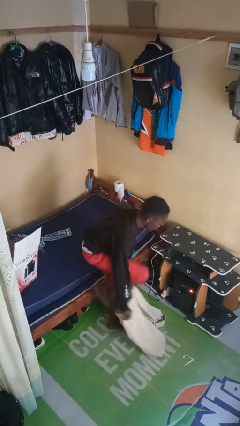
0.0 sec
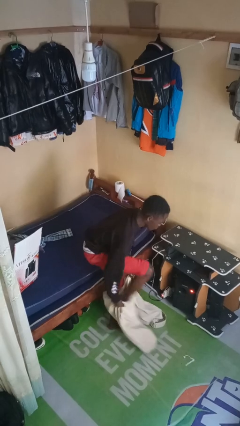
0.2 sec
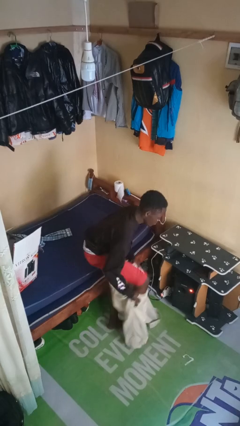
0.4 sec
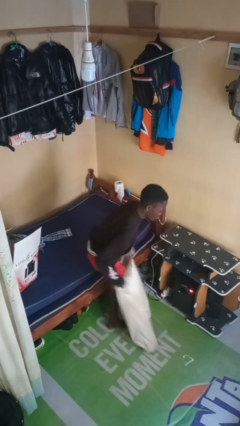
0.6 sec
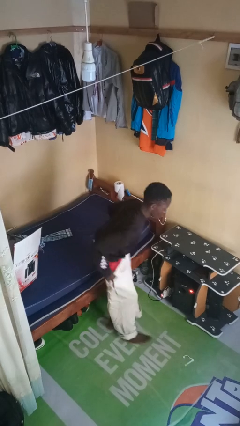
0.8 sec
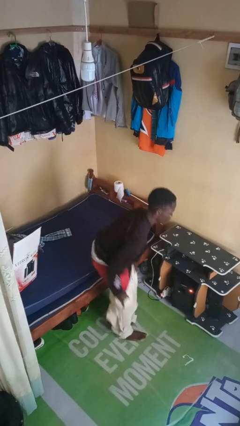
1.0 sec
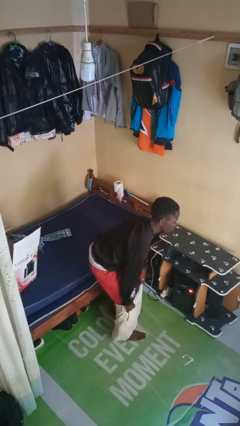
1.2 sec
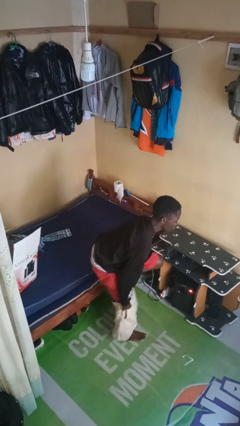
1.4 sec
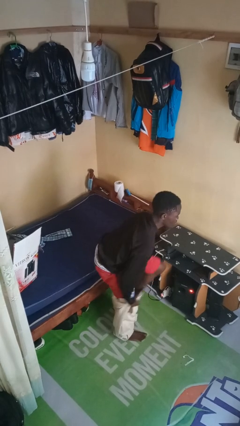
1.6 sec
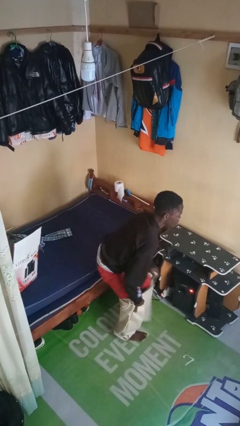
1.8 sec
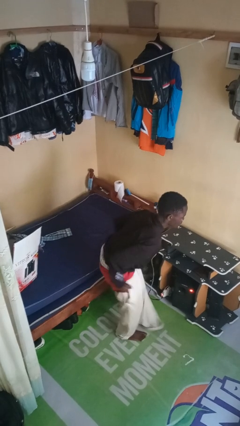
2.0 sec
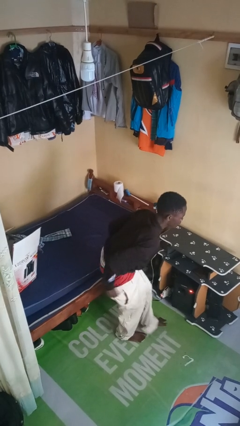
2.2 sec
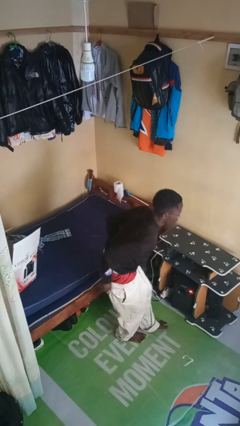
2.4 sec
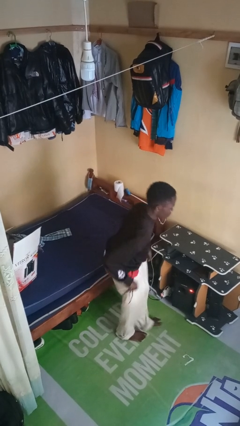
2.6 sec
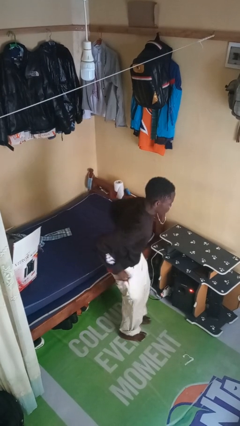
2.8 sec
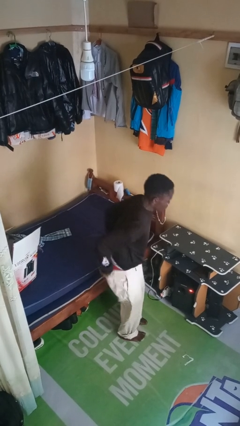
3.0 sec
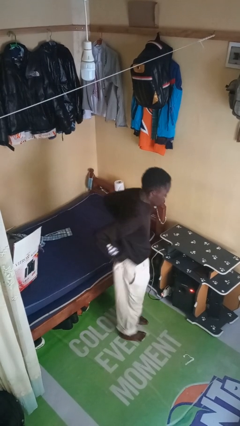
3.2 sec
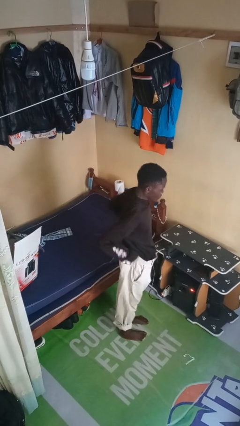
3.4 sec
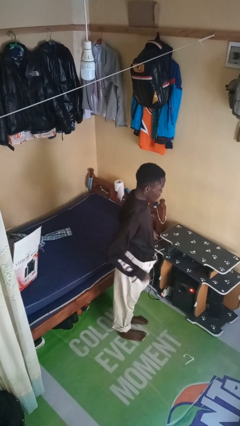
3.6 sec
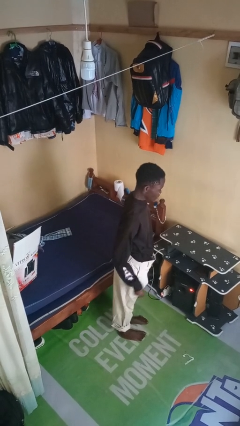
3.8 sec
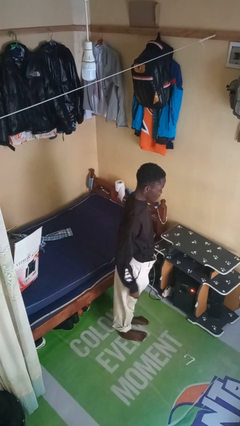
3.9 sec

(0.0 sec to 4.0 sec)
person puts on pants

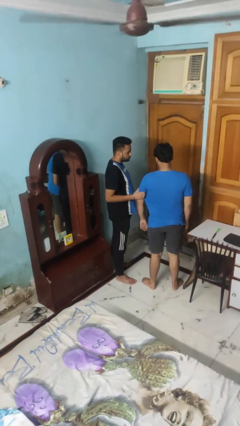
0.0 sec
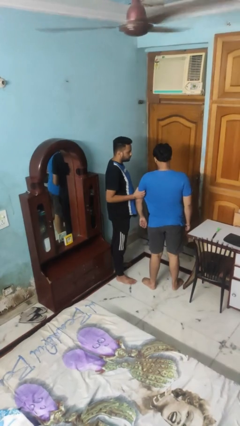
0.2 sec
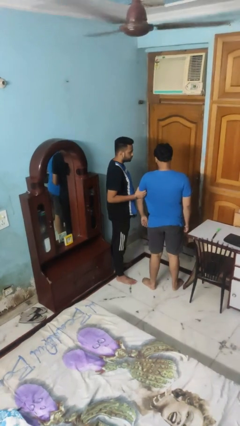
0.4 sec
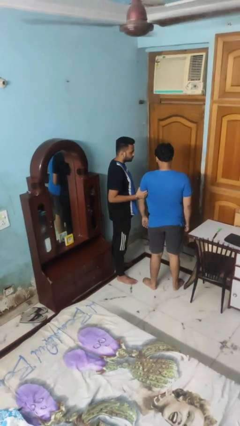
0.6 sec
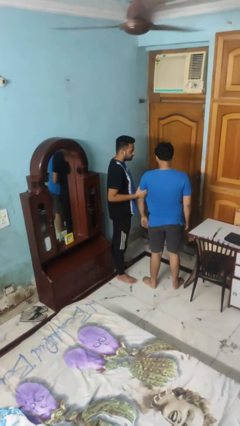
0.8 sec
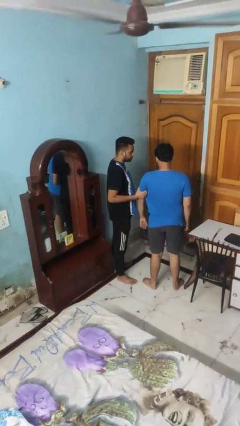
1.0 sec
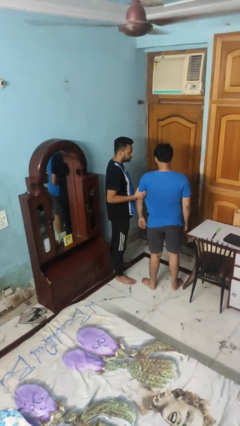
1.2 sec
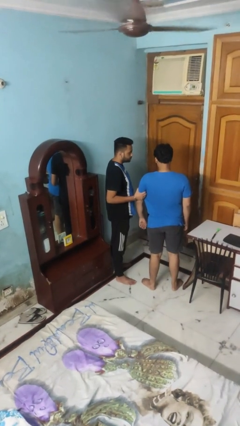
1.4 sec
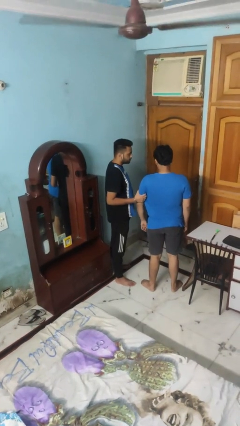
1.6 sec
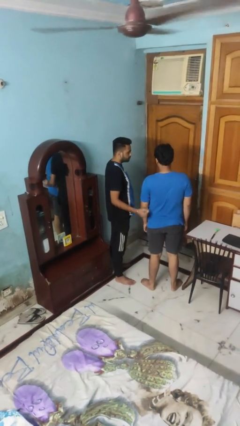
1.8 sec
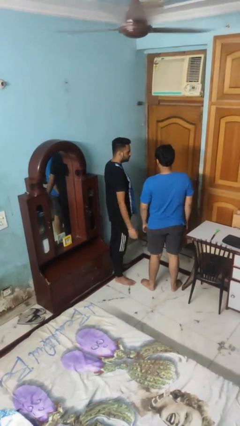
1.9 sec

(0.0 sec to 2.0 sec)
person grabs person by bicep

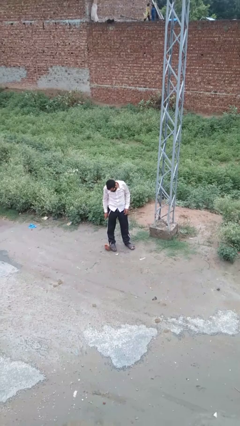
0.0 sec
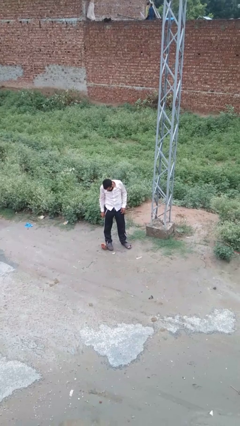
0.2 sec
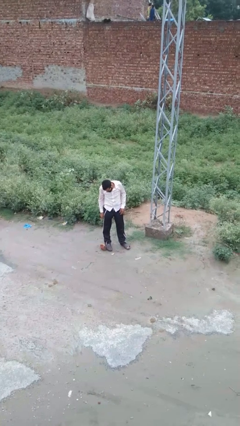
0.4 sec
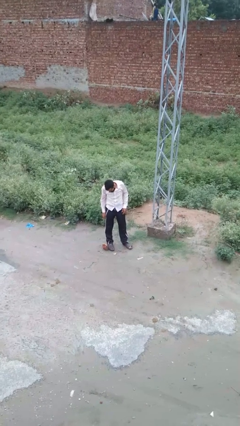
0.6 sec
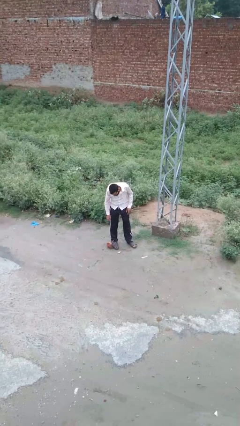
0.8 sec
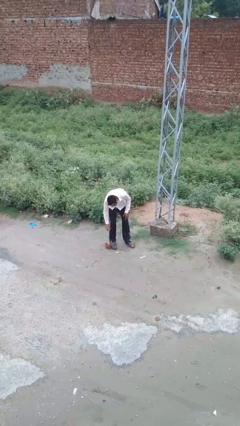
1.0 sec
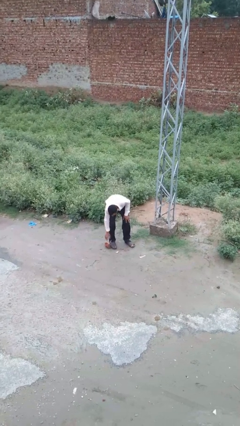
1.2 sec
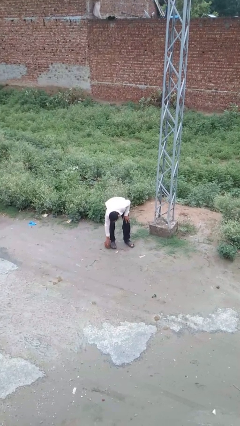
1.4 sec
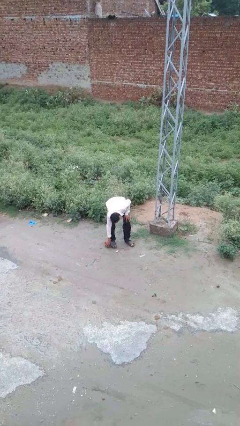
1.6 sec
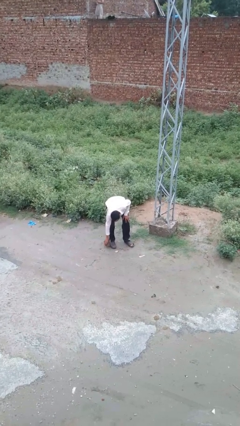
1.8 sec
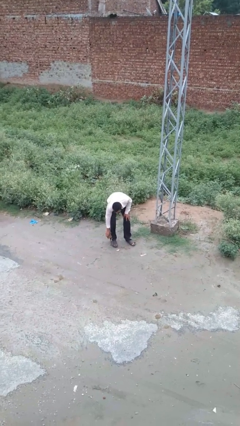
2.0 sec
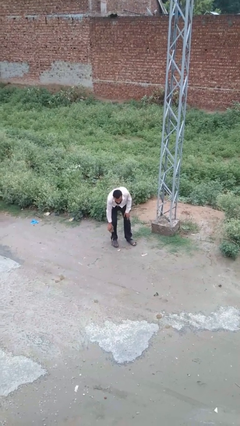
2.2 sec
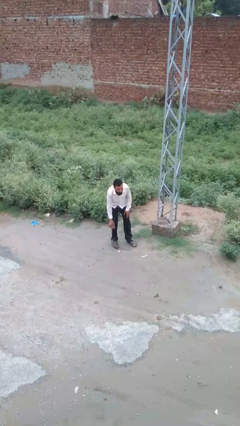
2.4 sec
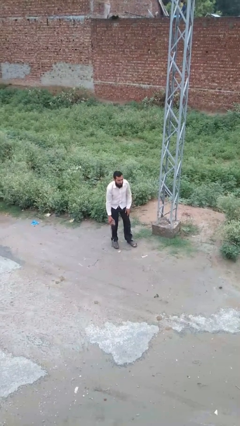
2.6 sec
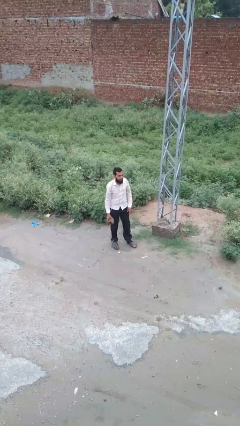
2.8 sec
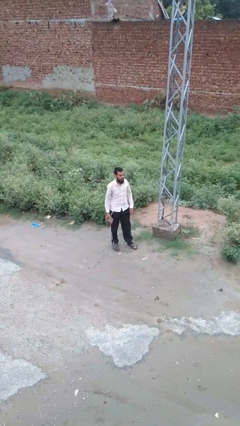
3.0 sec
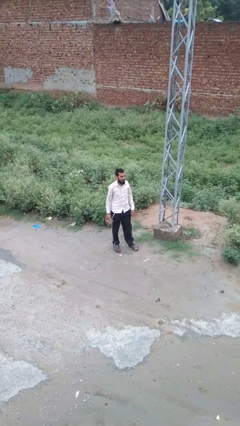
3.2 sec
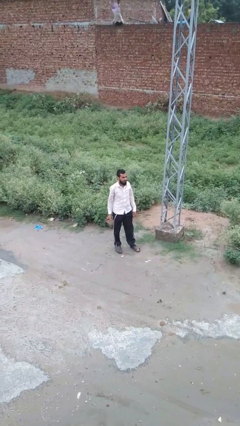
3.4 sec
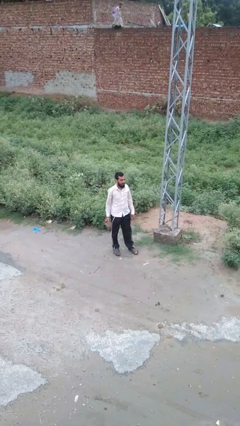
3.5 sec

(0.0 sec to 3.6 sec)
person picks up object from floor

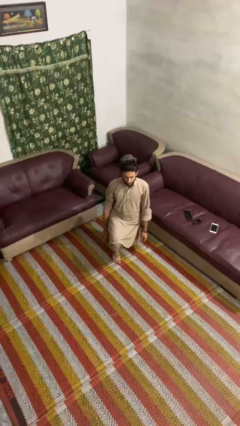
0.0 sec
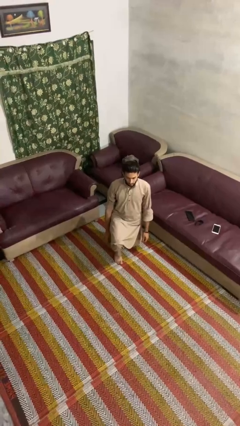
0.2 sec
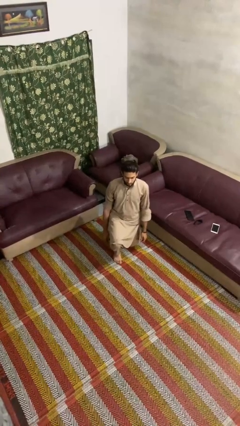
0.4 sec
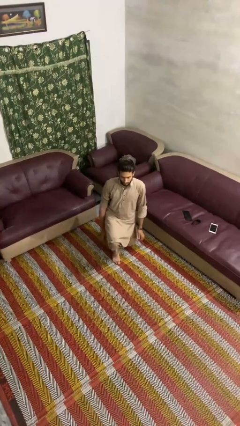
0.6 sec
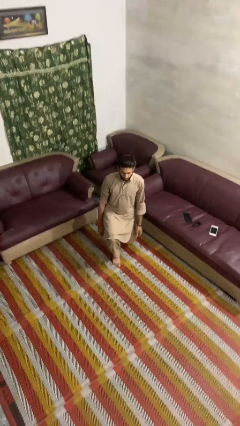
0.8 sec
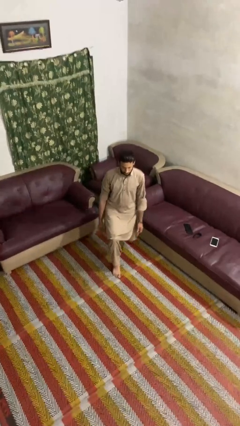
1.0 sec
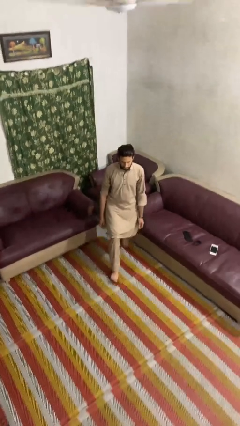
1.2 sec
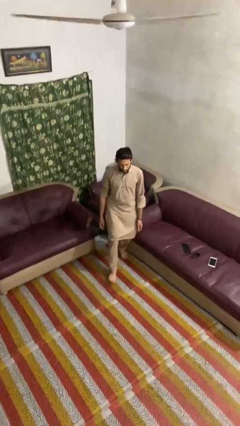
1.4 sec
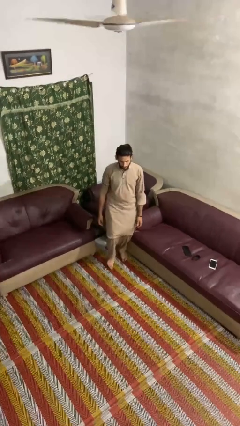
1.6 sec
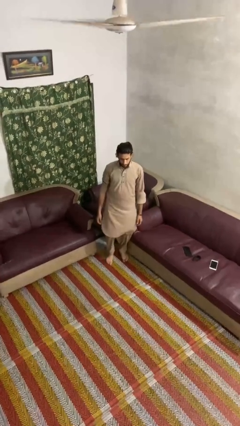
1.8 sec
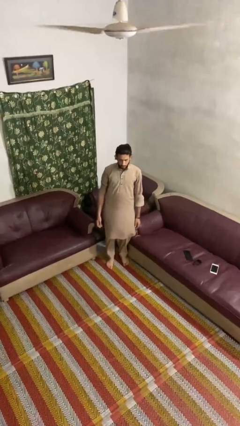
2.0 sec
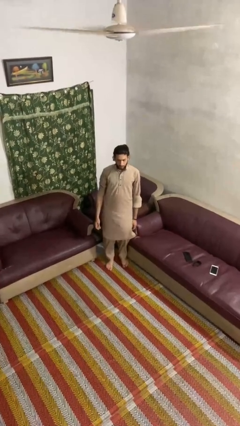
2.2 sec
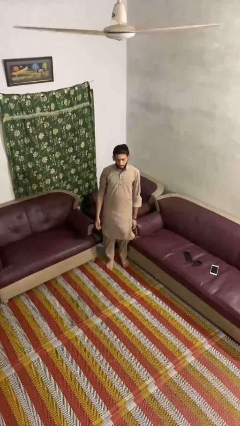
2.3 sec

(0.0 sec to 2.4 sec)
person stands up from floor

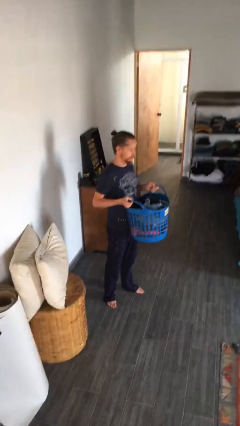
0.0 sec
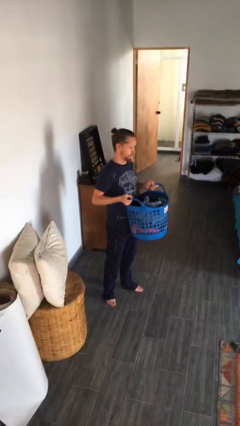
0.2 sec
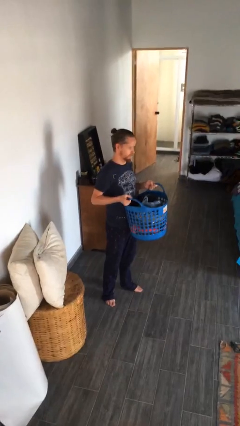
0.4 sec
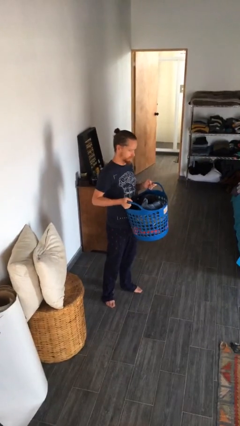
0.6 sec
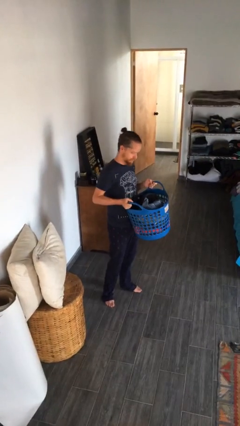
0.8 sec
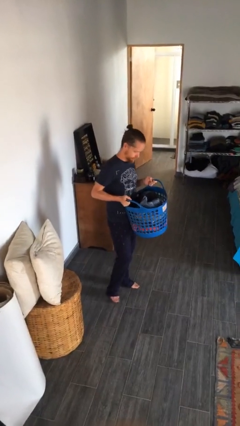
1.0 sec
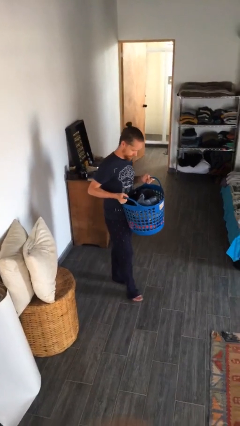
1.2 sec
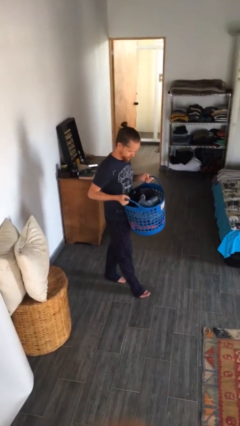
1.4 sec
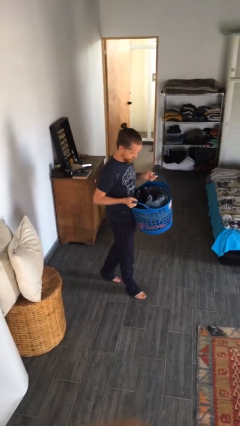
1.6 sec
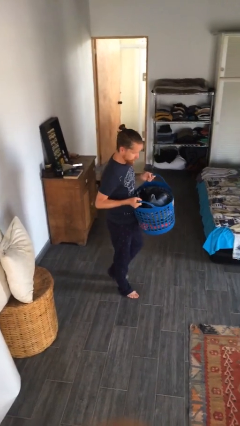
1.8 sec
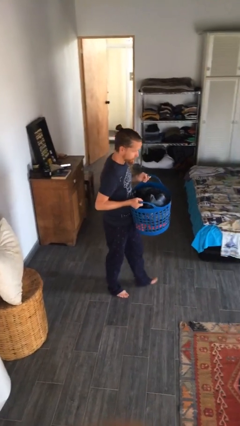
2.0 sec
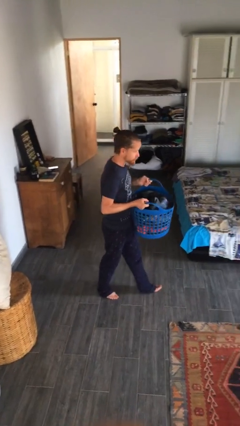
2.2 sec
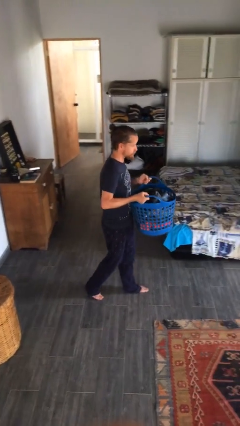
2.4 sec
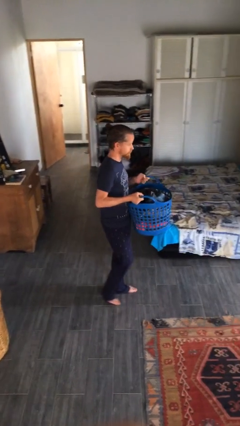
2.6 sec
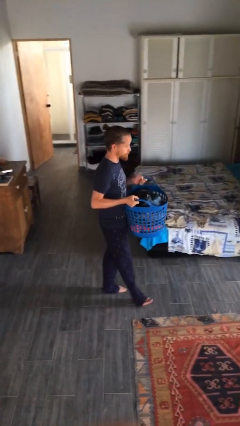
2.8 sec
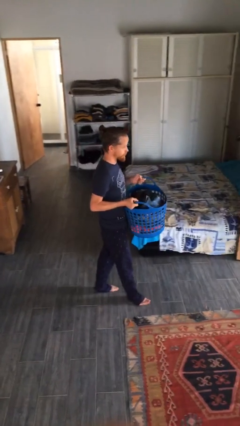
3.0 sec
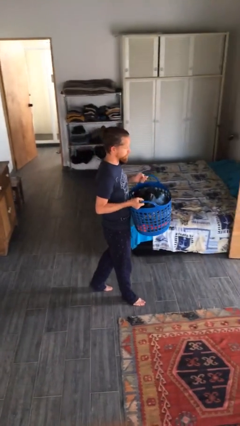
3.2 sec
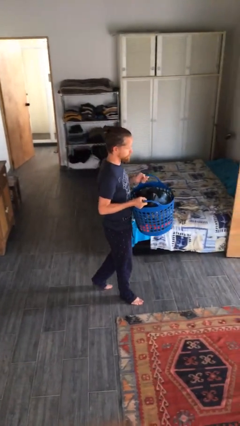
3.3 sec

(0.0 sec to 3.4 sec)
person carries laundry basket

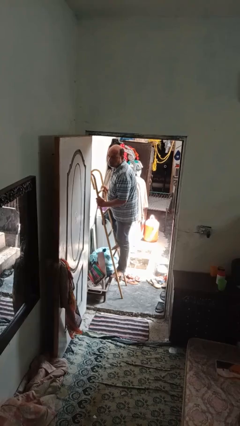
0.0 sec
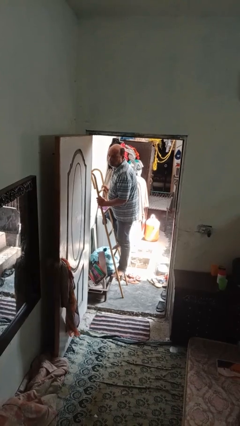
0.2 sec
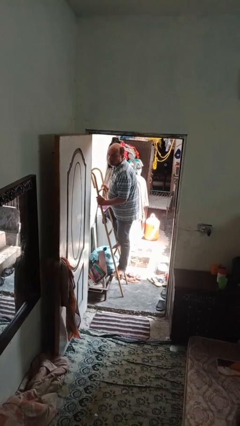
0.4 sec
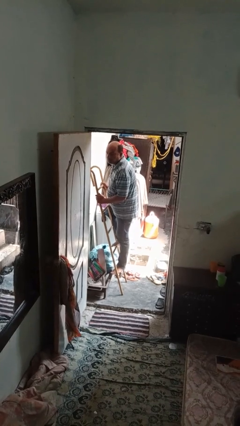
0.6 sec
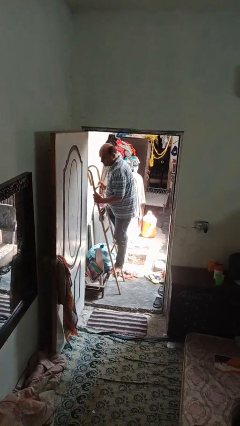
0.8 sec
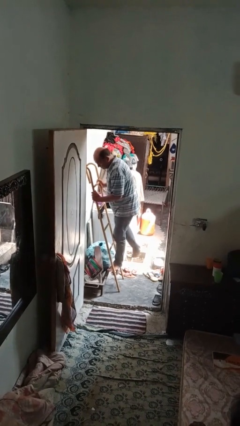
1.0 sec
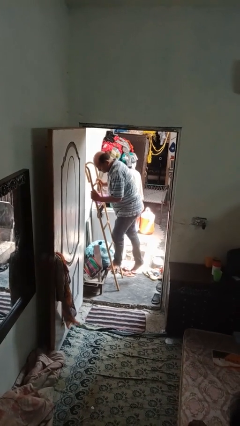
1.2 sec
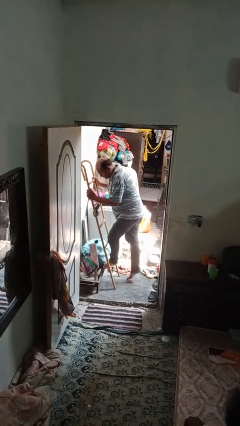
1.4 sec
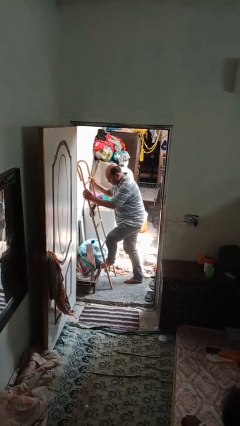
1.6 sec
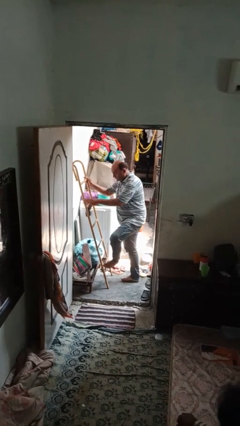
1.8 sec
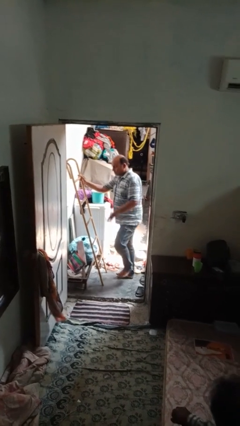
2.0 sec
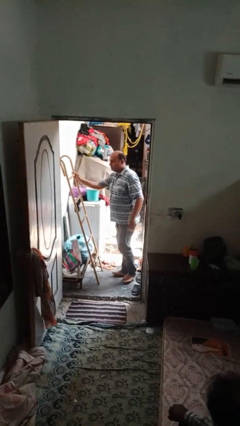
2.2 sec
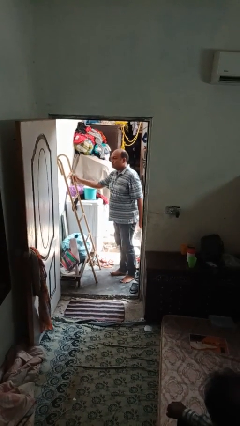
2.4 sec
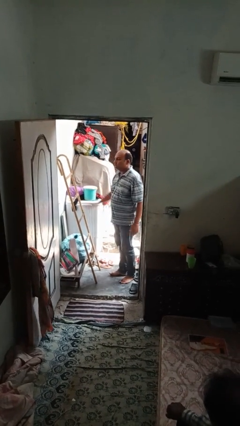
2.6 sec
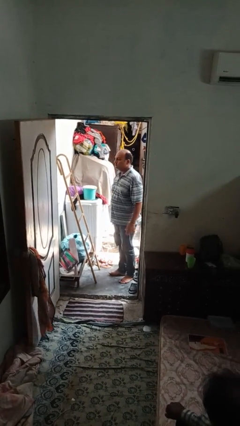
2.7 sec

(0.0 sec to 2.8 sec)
person climbs down ladder
